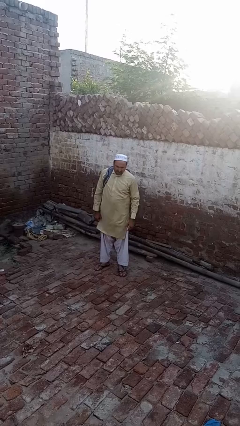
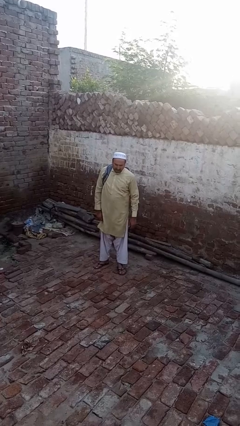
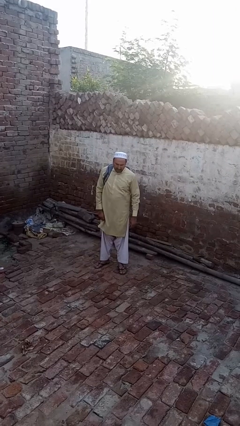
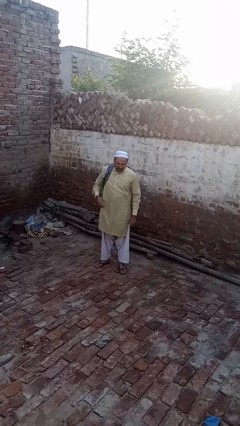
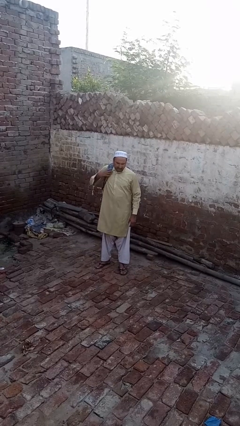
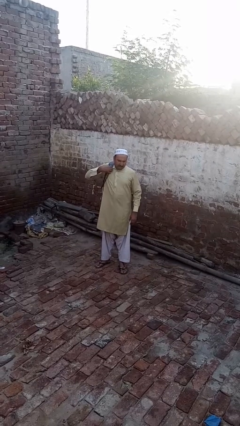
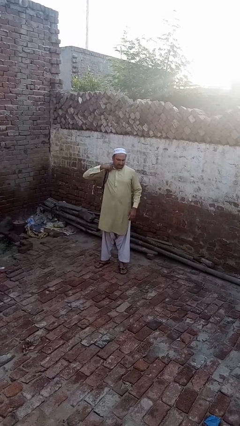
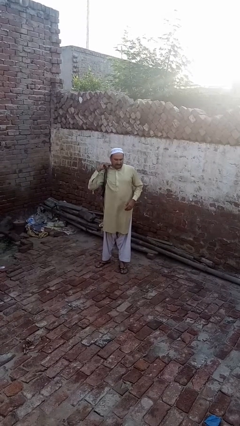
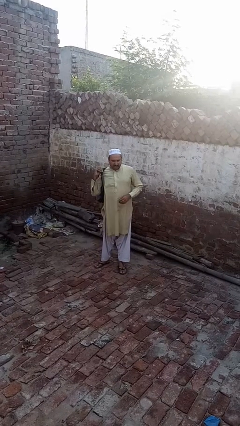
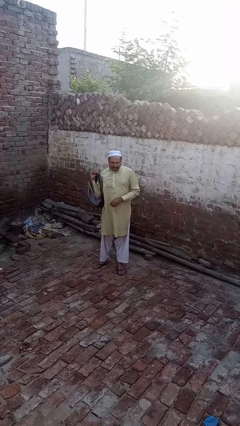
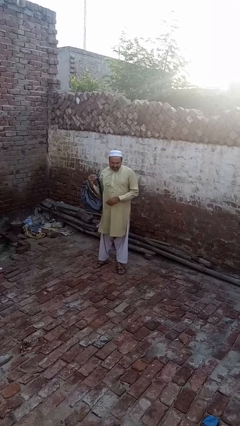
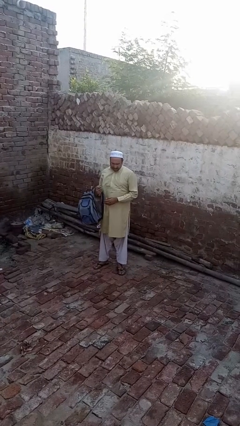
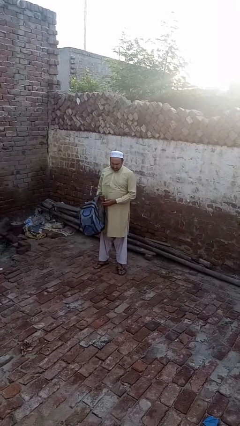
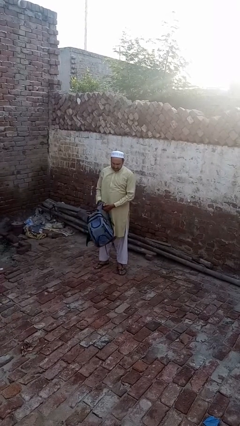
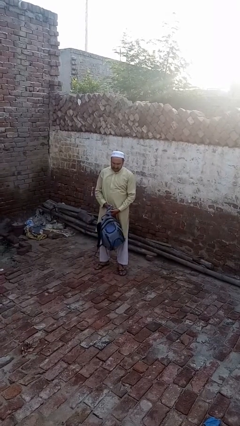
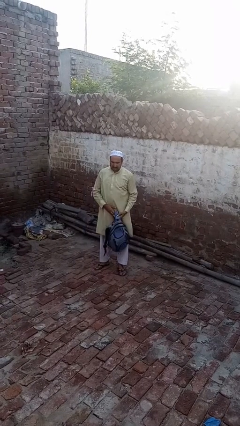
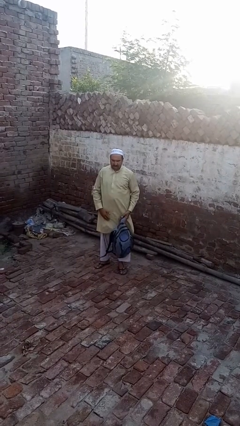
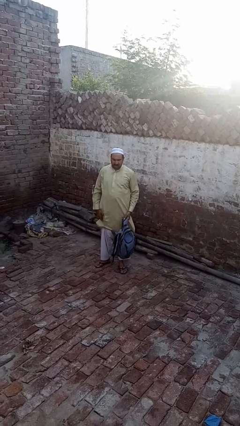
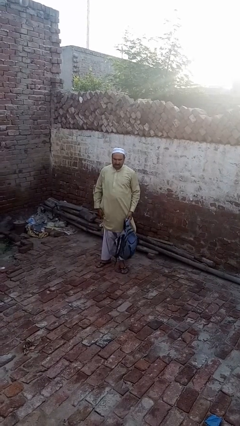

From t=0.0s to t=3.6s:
person takes off backpack

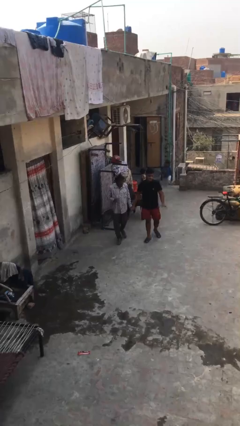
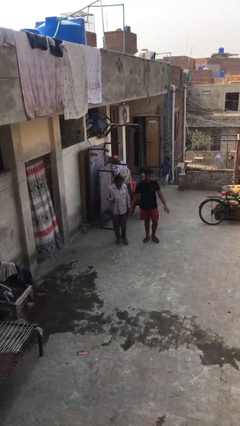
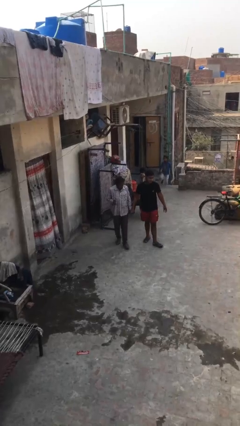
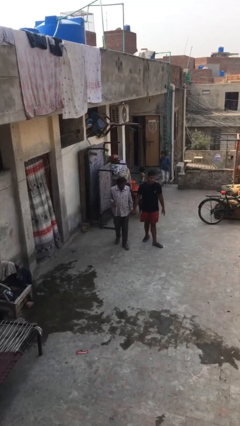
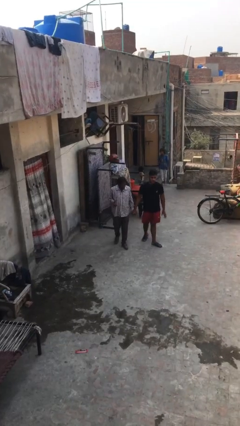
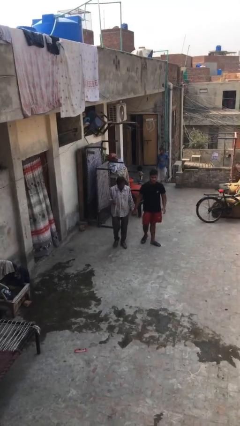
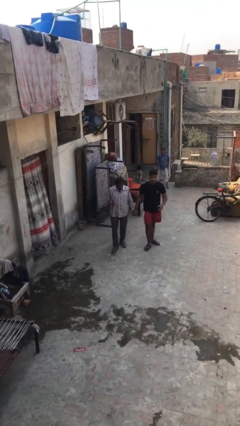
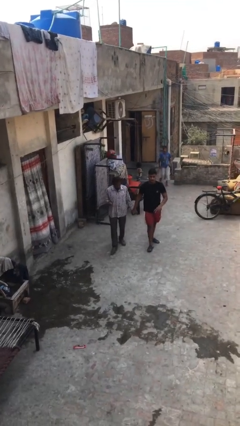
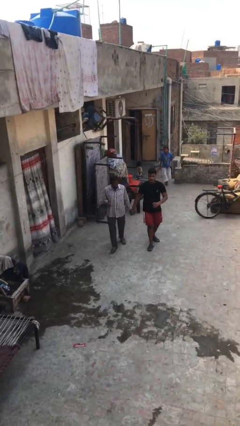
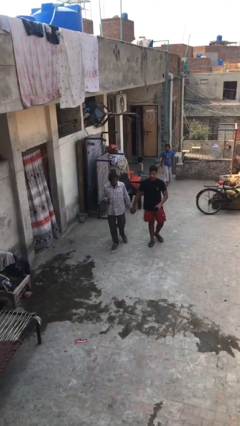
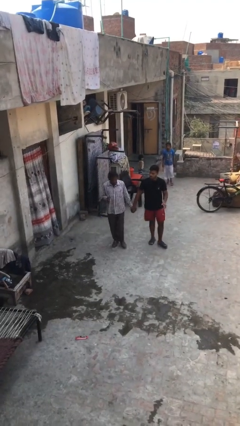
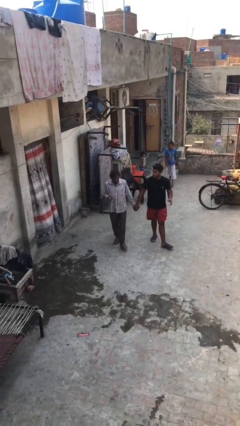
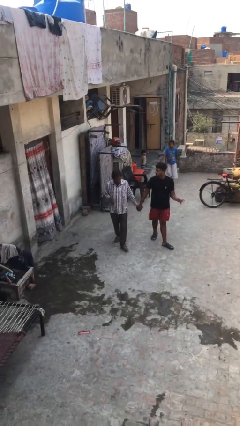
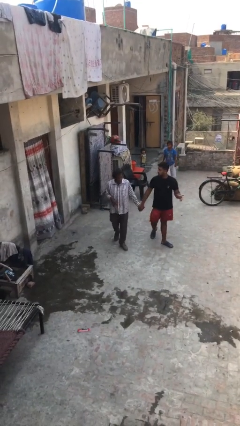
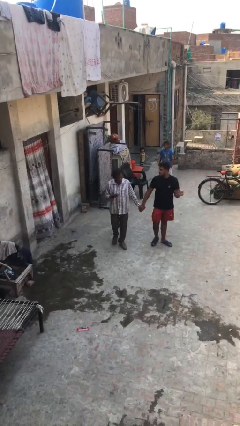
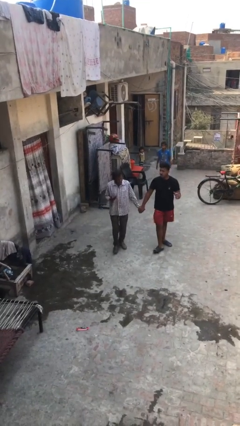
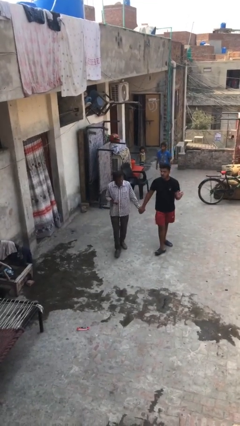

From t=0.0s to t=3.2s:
person holds hand

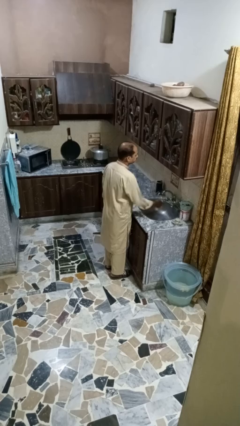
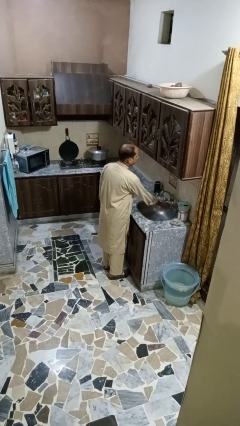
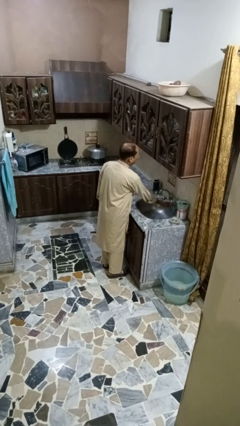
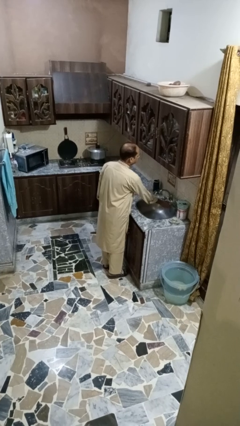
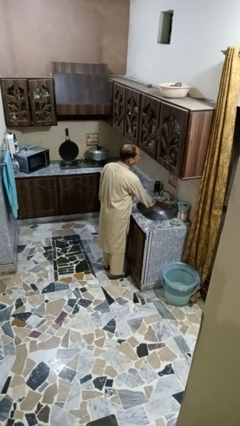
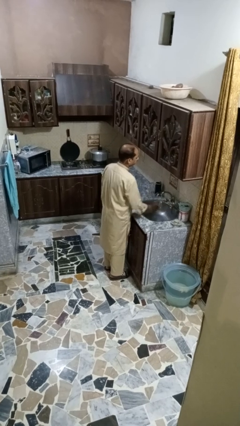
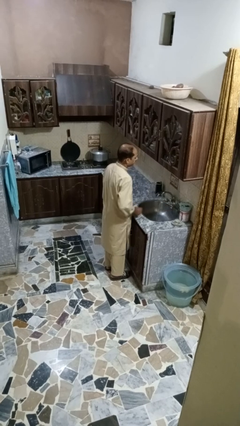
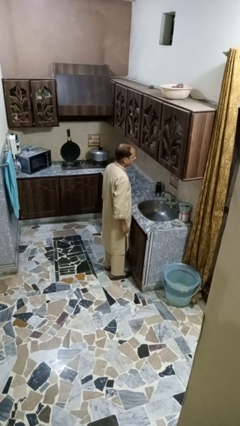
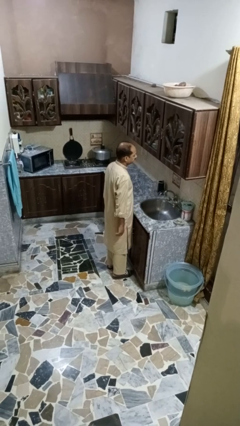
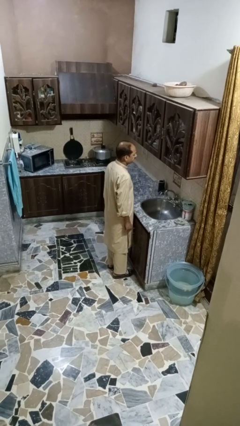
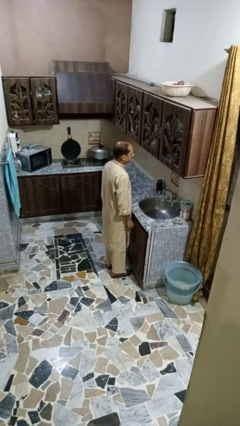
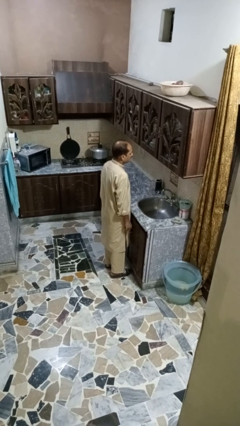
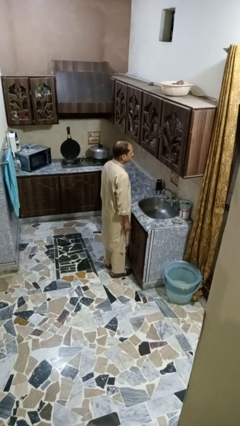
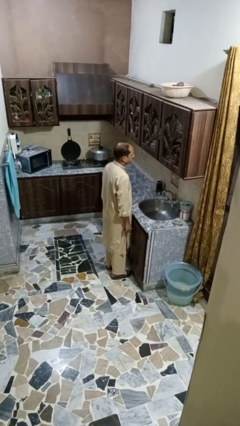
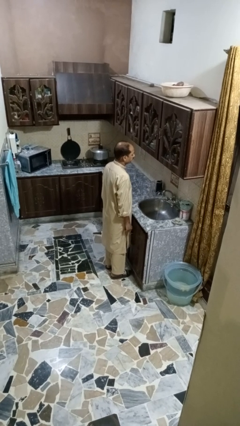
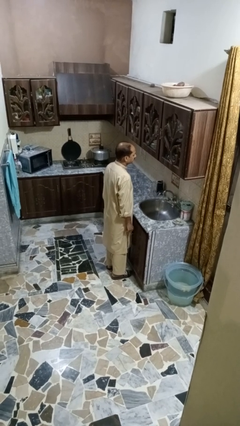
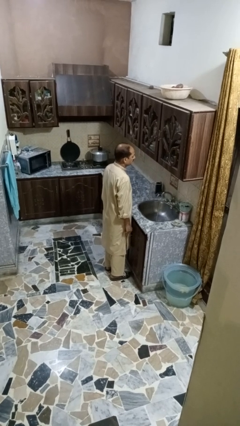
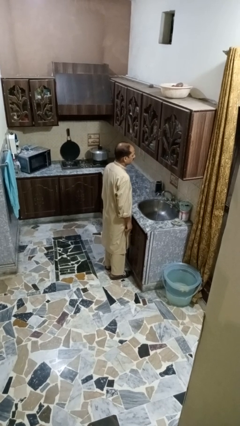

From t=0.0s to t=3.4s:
person turns on faucet

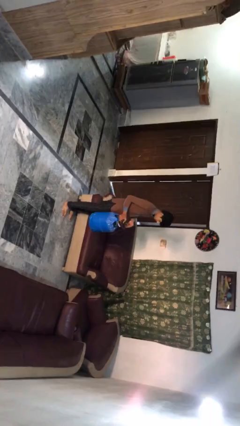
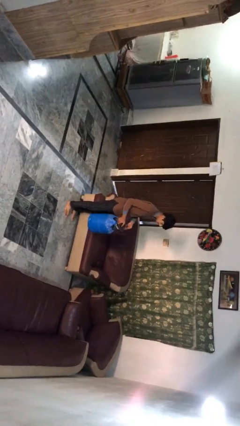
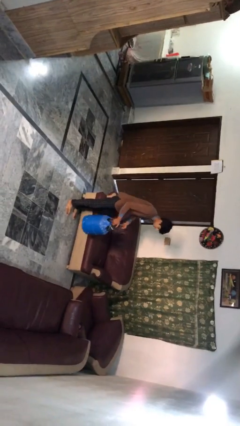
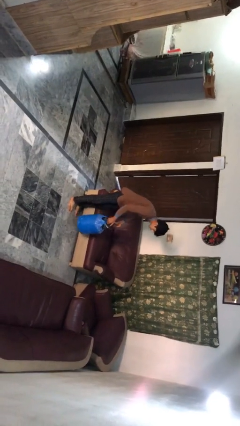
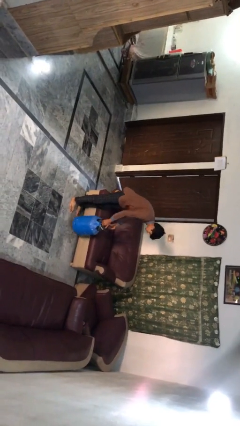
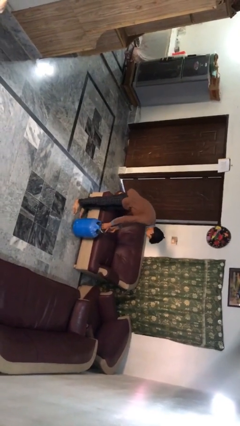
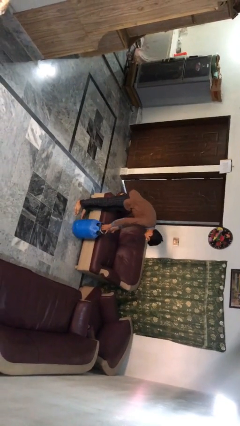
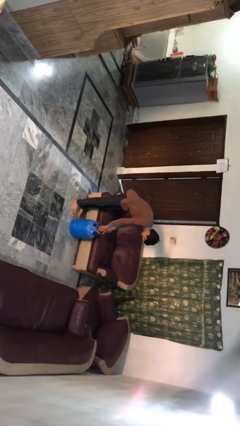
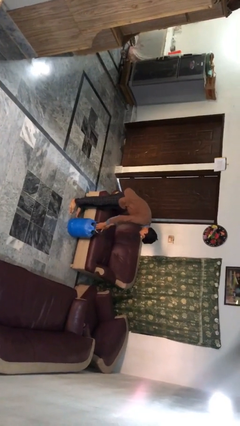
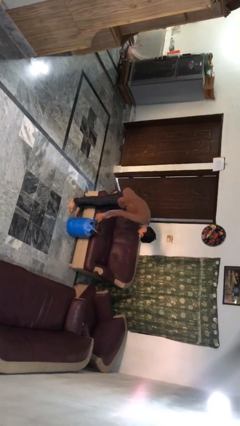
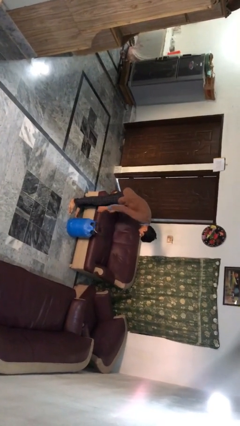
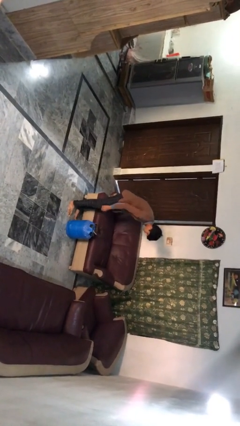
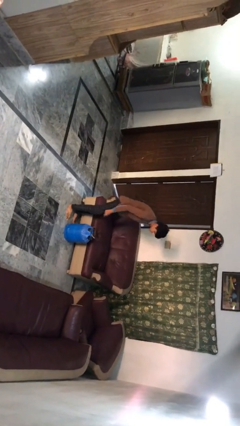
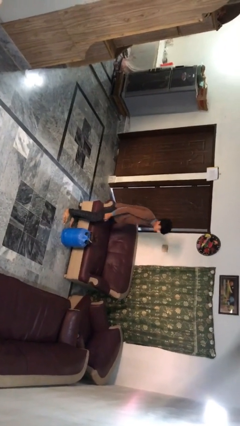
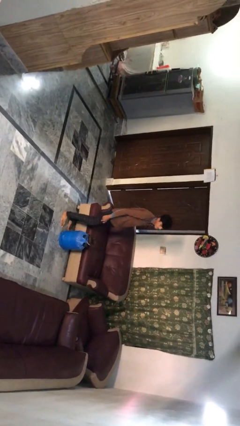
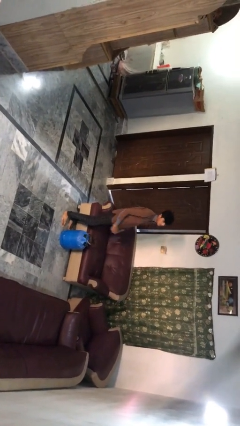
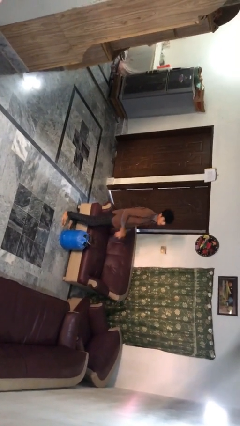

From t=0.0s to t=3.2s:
person puts down object on floor

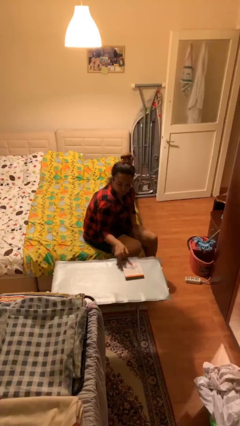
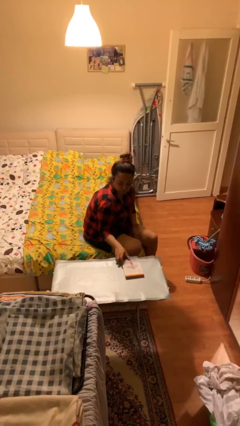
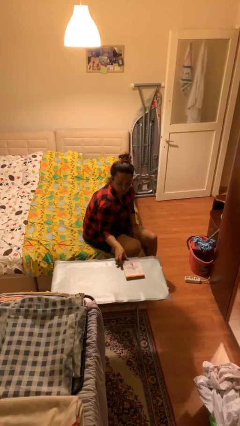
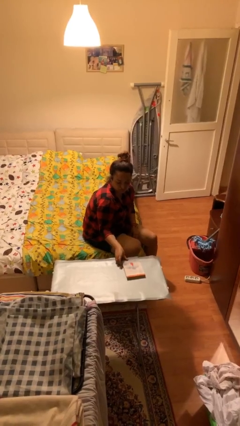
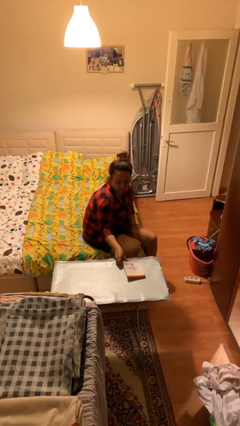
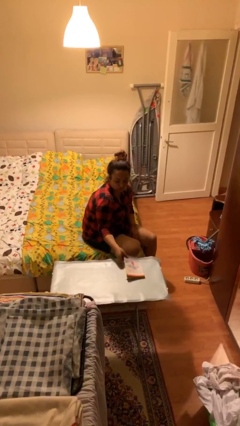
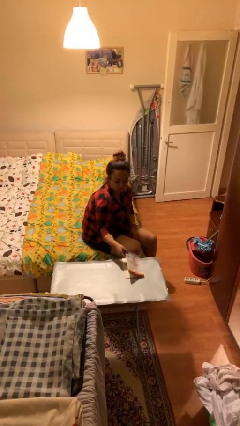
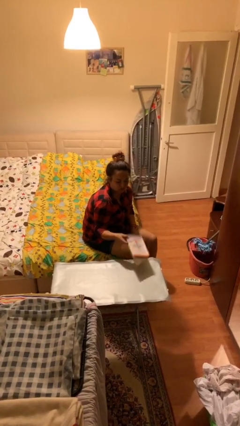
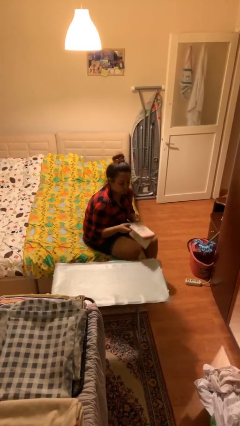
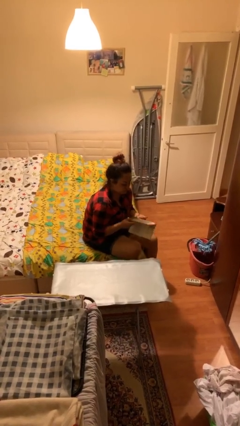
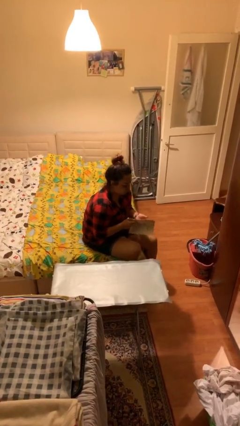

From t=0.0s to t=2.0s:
person picks up object from table

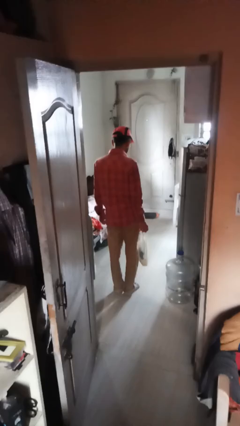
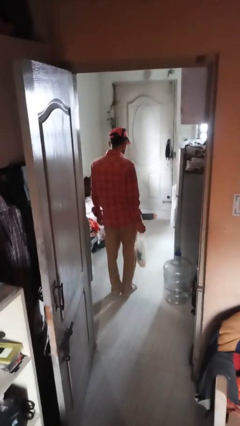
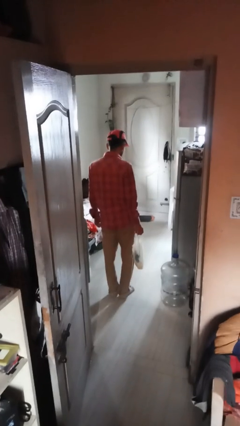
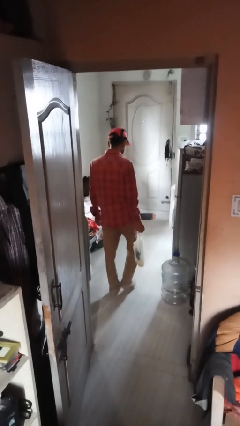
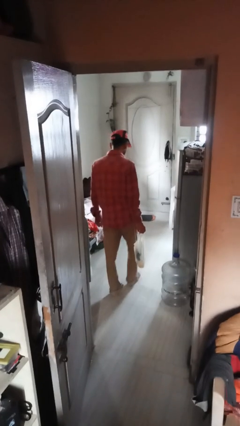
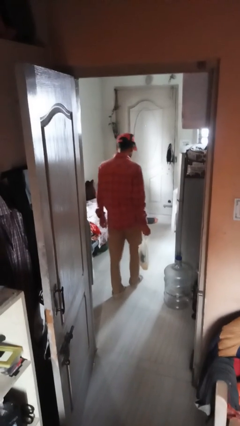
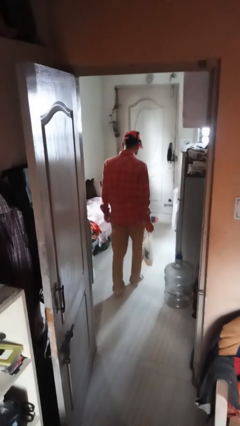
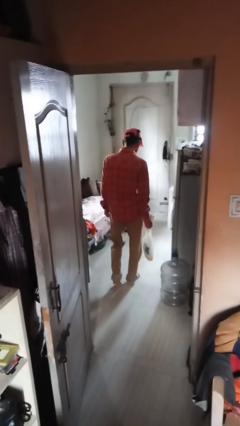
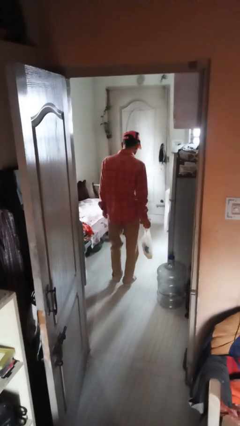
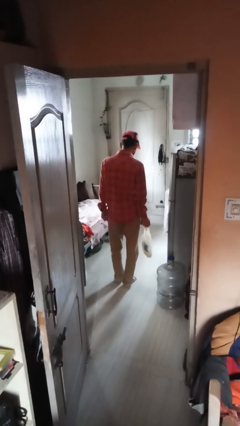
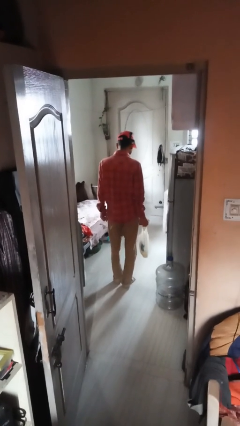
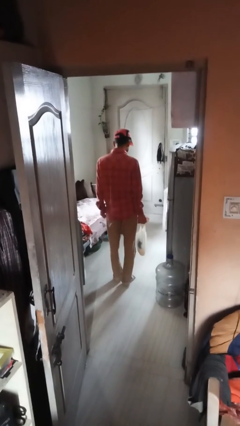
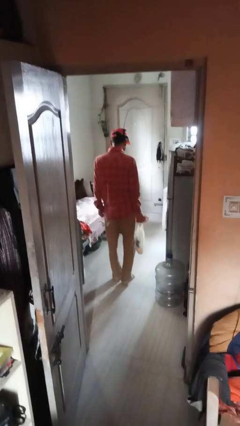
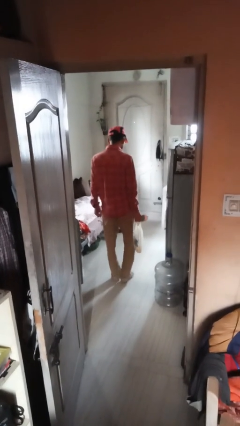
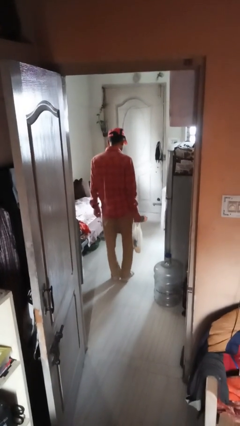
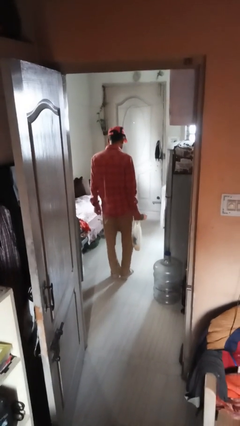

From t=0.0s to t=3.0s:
person carries groceries
